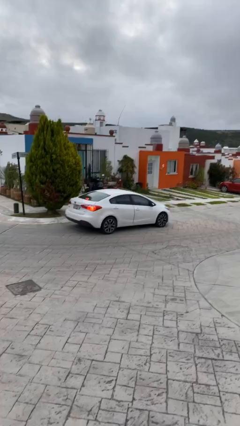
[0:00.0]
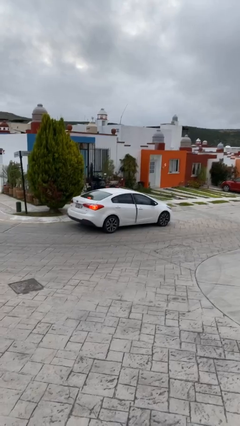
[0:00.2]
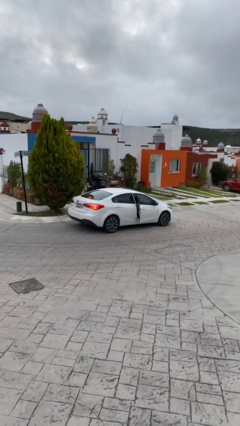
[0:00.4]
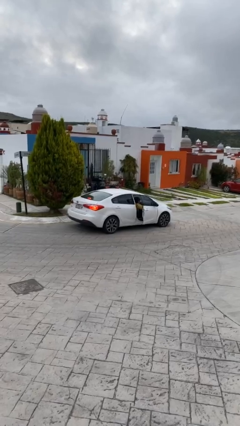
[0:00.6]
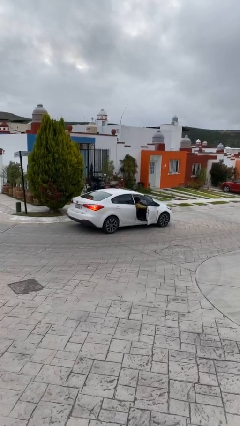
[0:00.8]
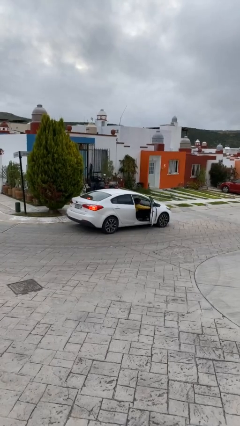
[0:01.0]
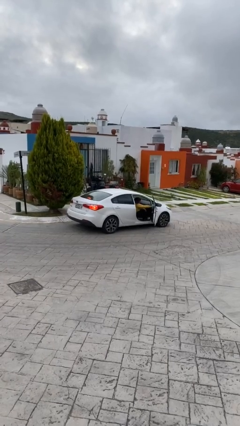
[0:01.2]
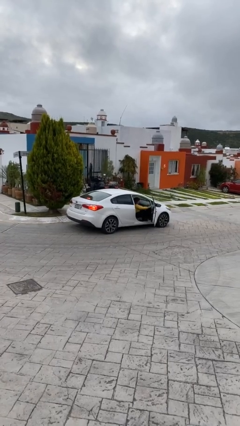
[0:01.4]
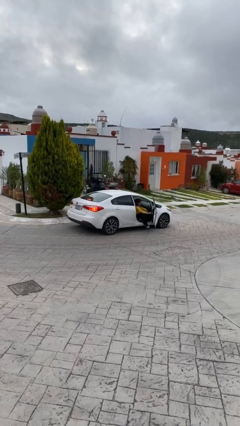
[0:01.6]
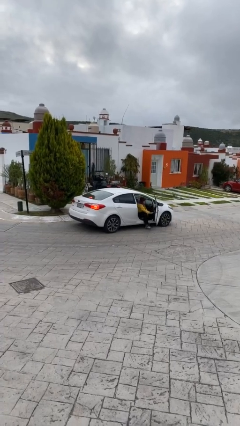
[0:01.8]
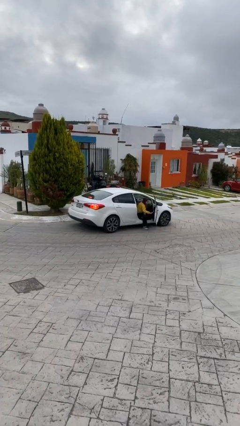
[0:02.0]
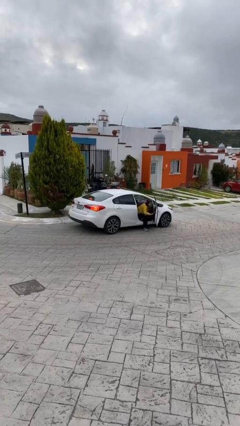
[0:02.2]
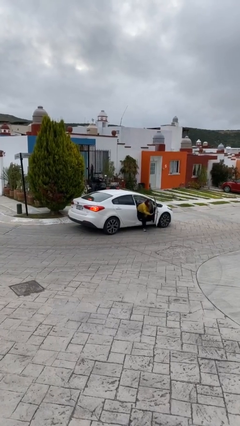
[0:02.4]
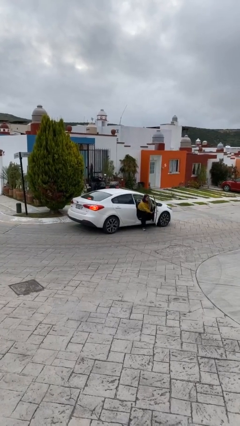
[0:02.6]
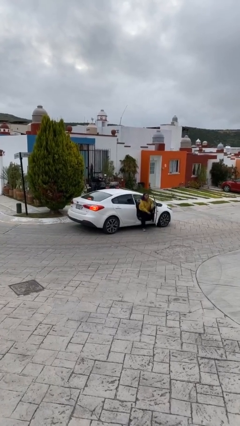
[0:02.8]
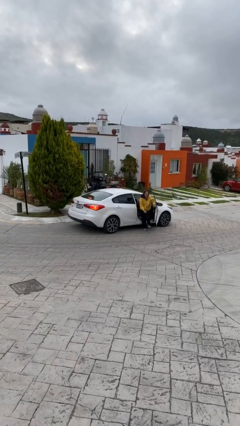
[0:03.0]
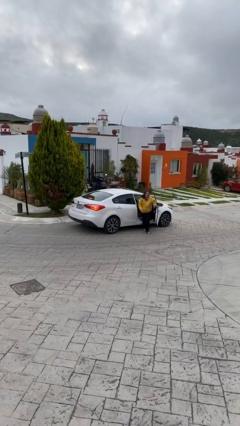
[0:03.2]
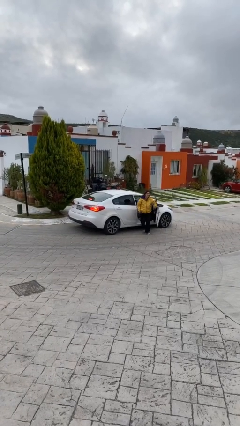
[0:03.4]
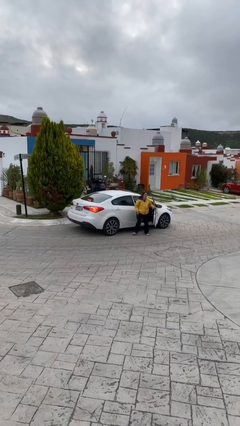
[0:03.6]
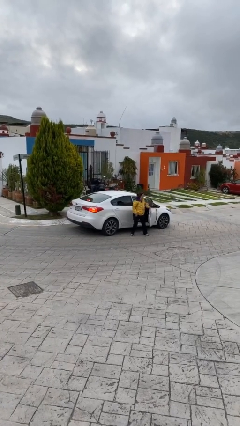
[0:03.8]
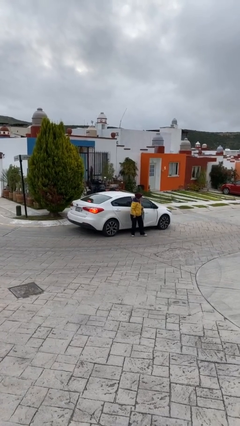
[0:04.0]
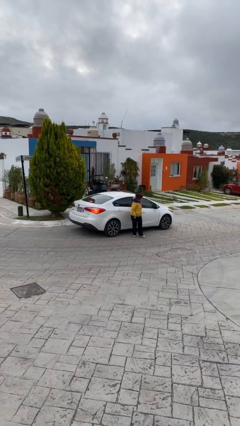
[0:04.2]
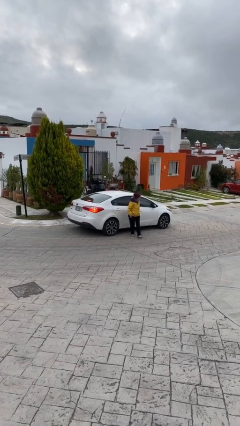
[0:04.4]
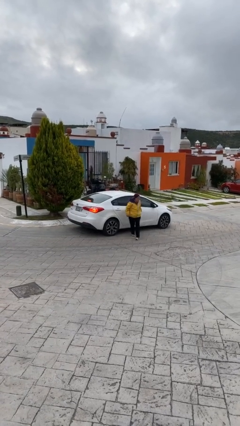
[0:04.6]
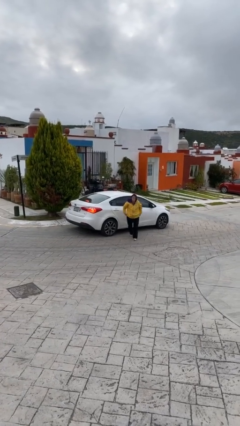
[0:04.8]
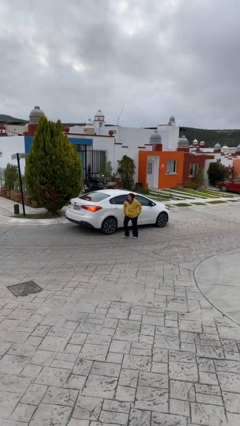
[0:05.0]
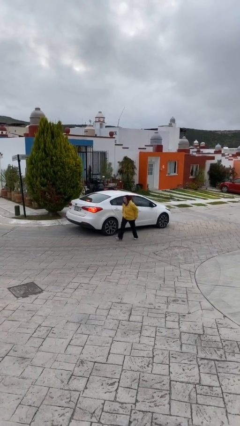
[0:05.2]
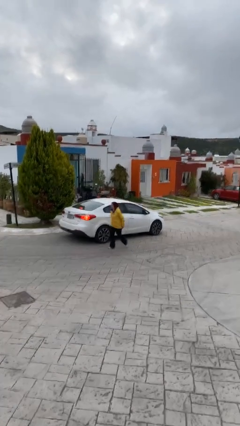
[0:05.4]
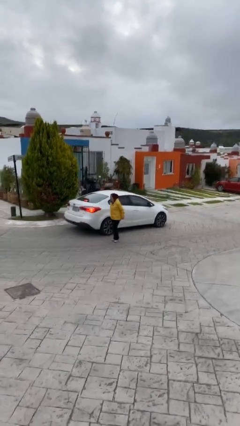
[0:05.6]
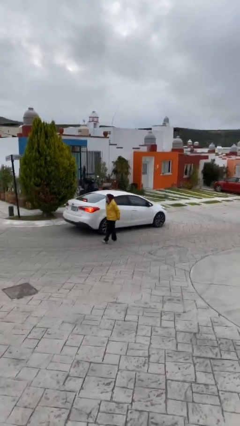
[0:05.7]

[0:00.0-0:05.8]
car drops off person

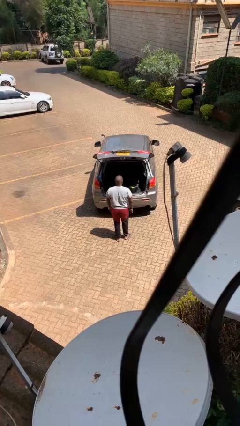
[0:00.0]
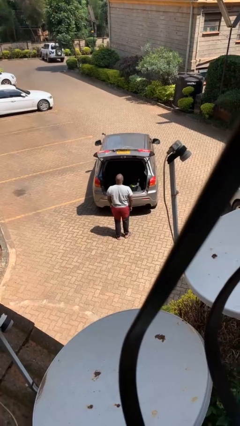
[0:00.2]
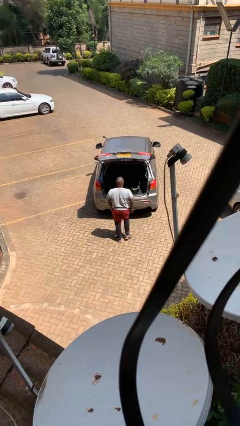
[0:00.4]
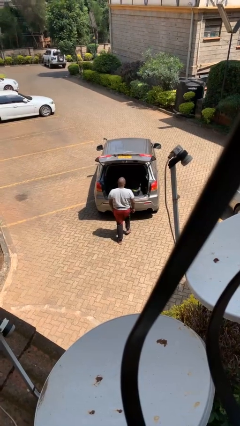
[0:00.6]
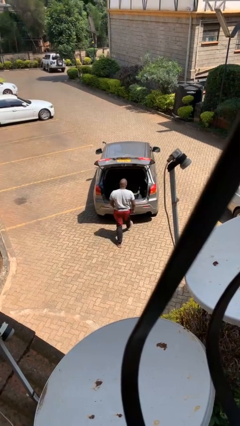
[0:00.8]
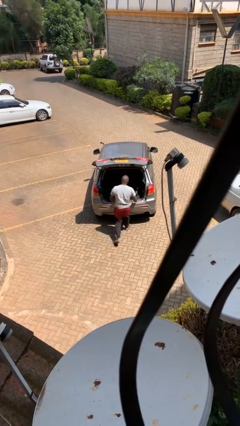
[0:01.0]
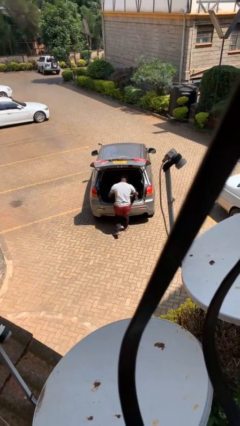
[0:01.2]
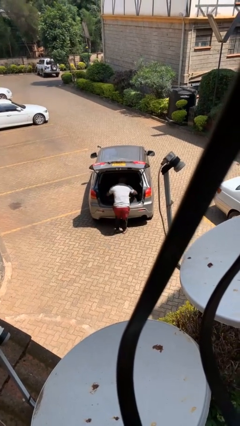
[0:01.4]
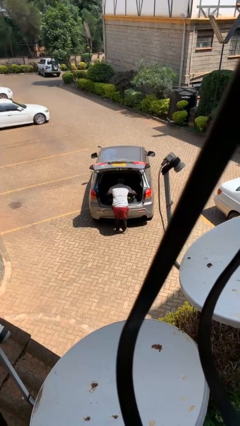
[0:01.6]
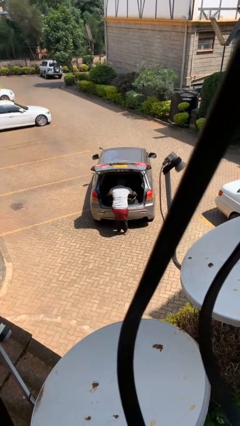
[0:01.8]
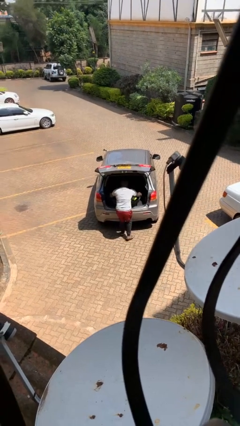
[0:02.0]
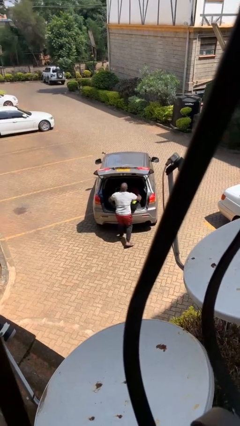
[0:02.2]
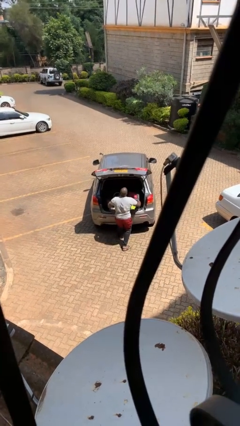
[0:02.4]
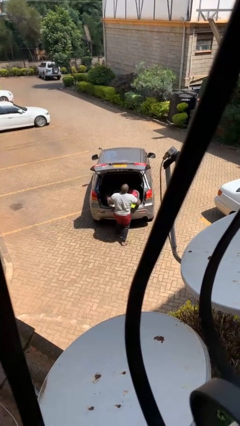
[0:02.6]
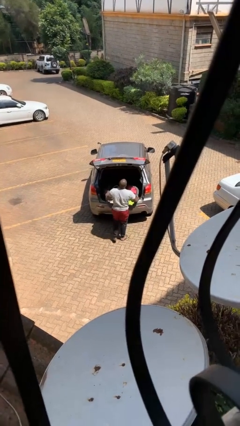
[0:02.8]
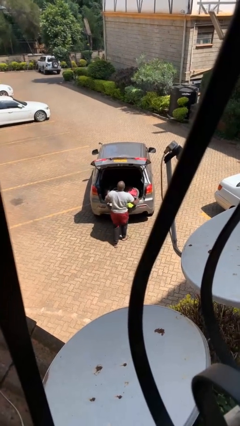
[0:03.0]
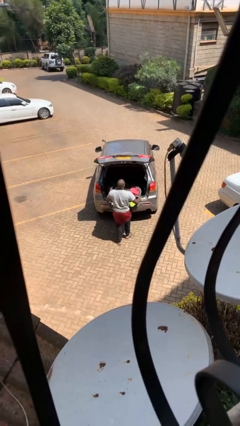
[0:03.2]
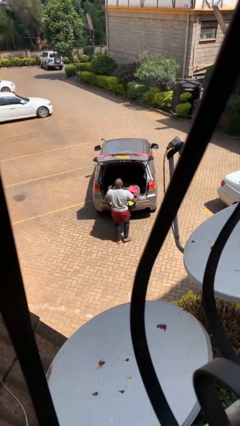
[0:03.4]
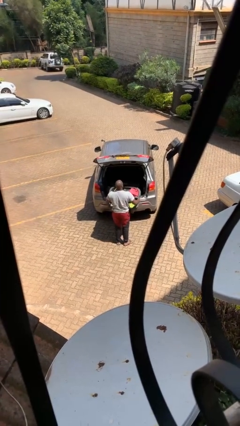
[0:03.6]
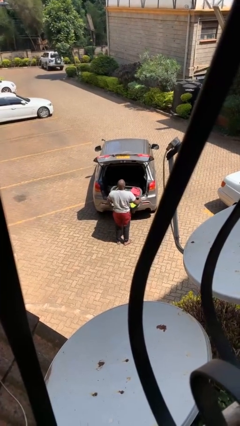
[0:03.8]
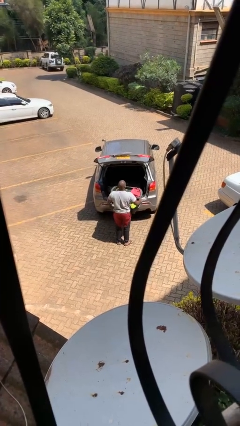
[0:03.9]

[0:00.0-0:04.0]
person unloads car

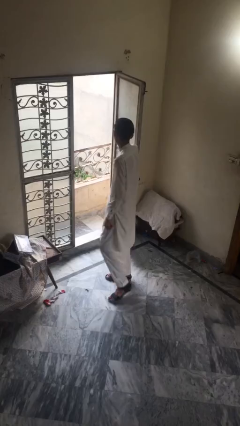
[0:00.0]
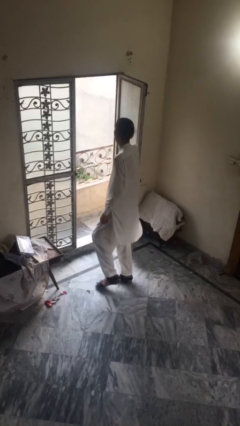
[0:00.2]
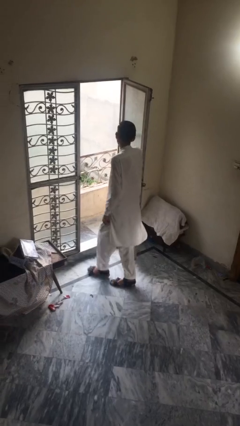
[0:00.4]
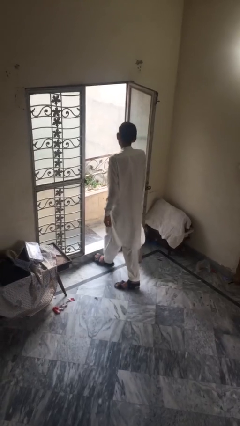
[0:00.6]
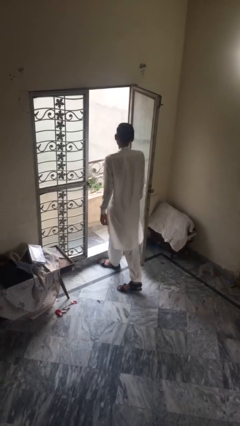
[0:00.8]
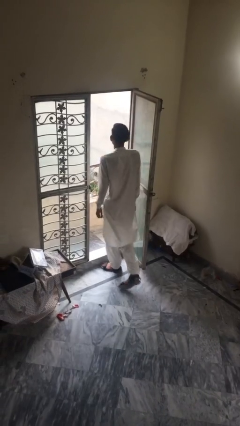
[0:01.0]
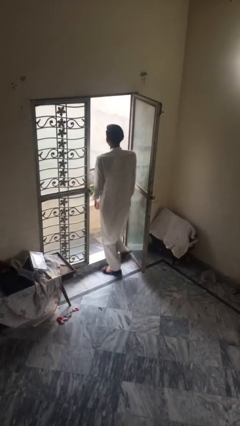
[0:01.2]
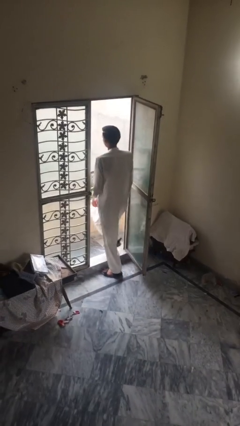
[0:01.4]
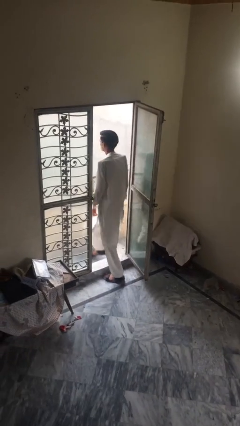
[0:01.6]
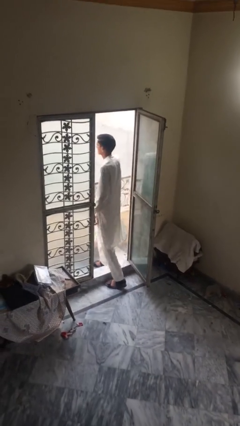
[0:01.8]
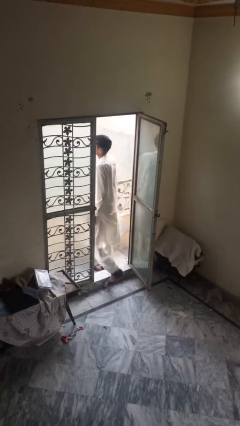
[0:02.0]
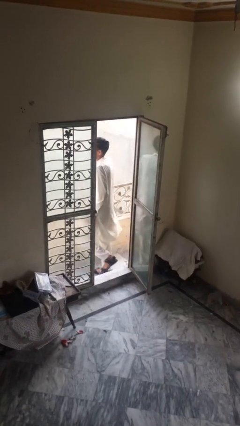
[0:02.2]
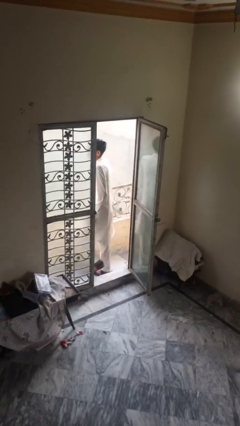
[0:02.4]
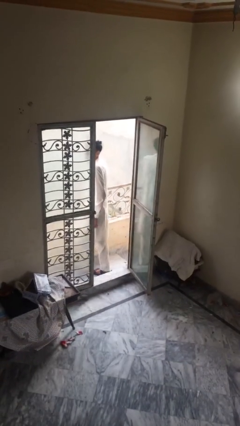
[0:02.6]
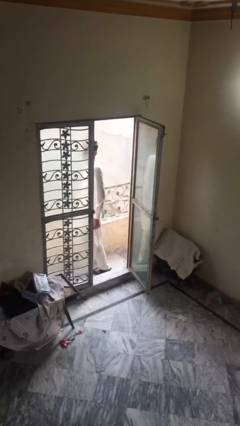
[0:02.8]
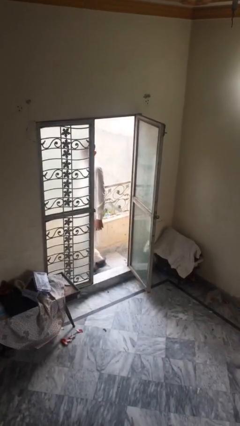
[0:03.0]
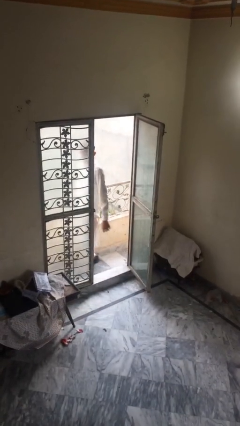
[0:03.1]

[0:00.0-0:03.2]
person exits scene through structure

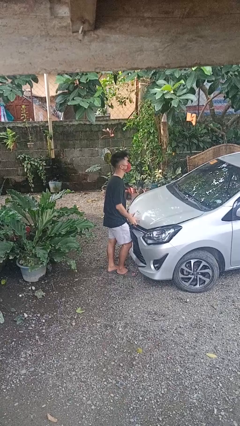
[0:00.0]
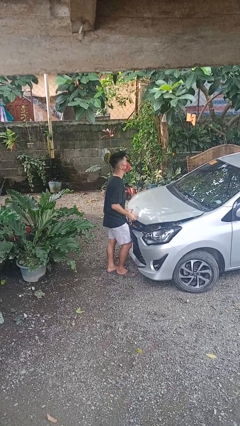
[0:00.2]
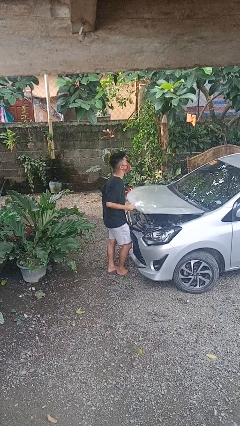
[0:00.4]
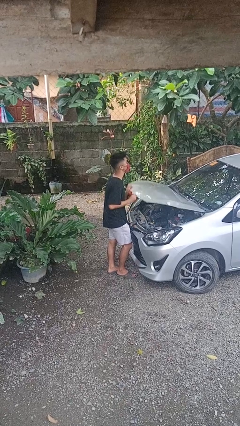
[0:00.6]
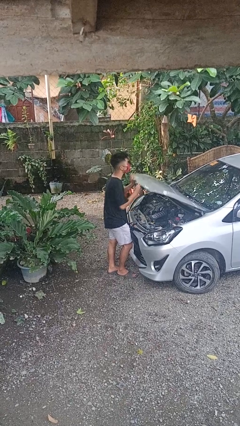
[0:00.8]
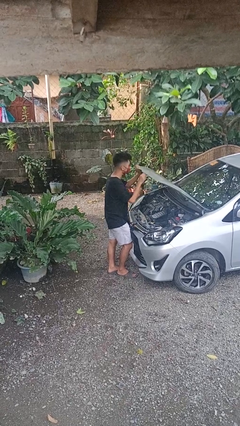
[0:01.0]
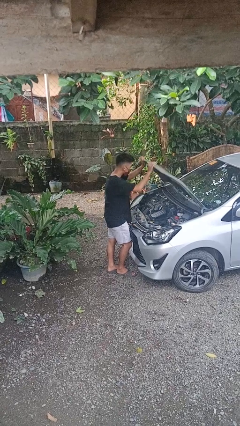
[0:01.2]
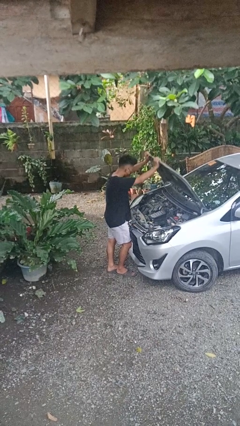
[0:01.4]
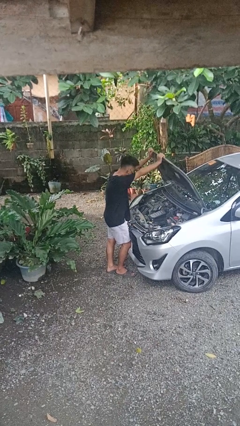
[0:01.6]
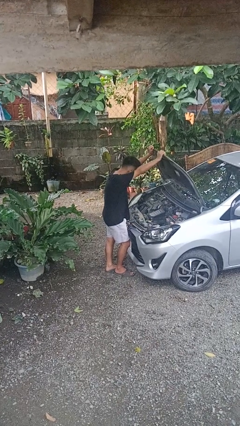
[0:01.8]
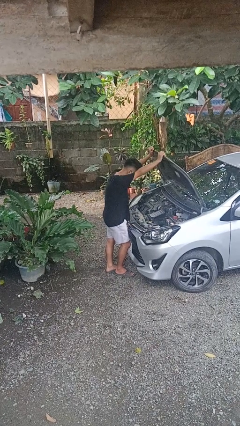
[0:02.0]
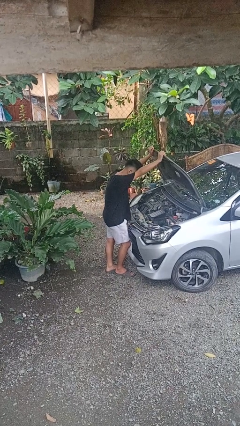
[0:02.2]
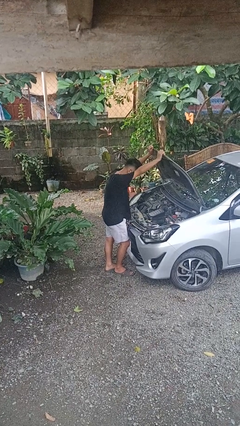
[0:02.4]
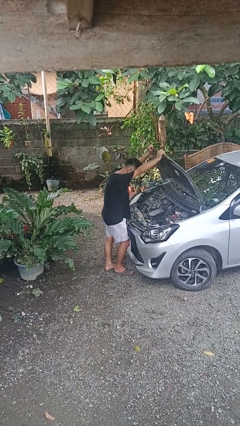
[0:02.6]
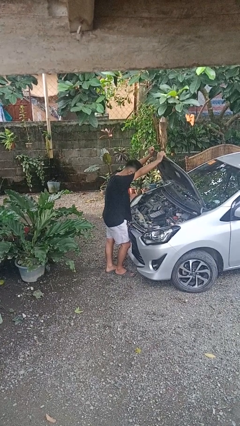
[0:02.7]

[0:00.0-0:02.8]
person opens car hood

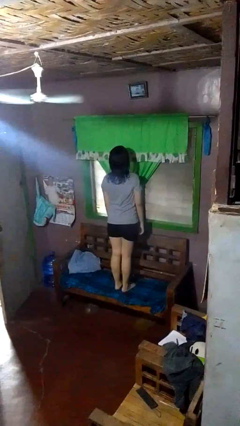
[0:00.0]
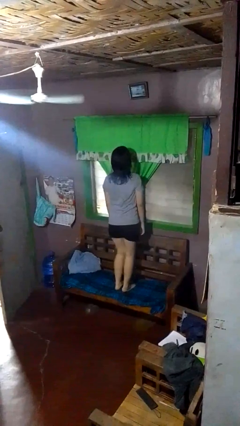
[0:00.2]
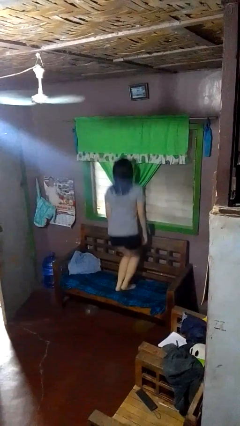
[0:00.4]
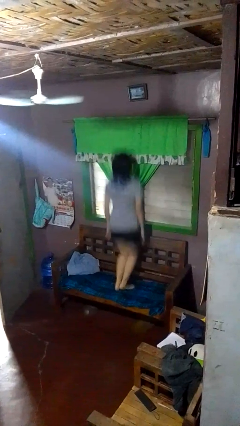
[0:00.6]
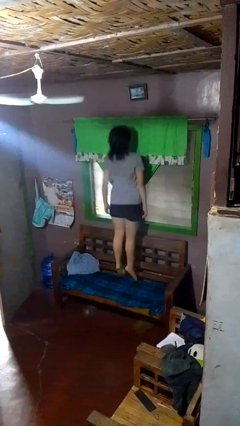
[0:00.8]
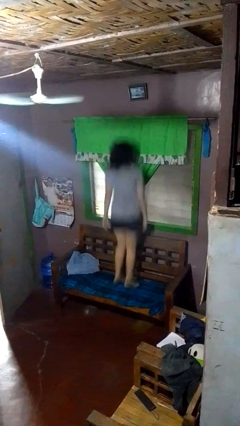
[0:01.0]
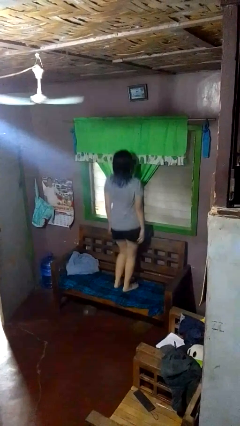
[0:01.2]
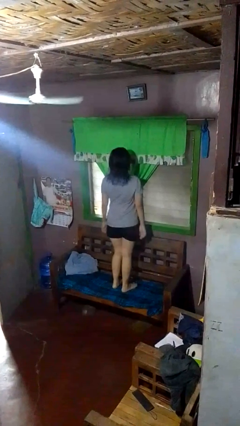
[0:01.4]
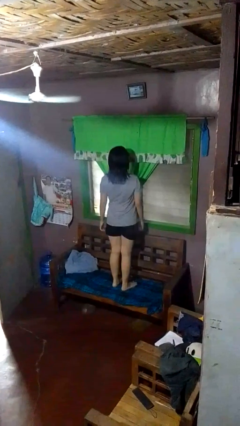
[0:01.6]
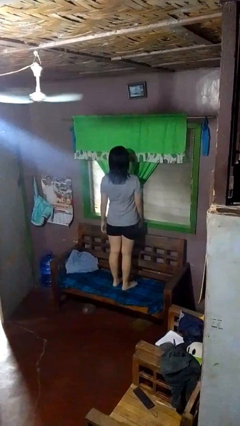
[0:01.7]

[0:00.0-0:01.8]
person jumps on couch

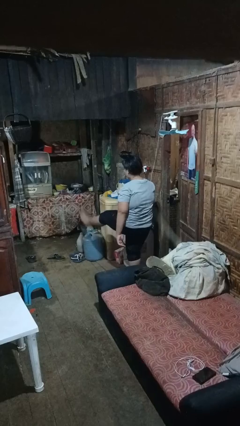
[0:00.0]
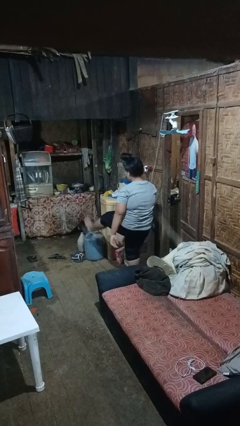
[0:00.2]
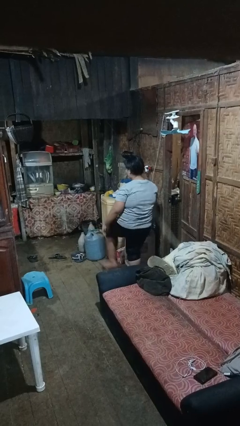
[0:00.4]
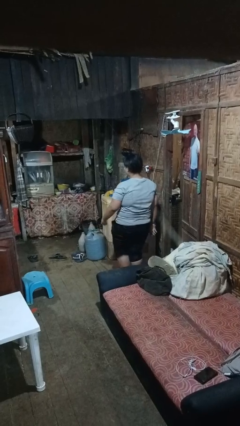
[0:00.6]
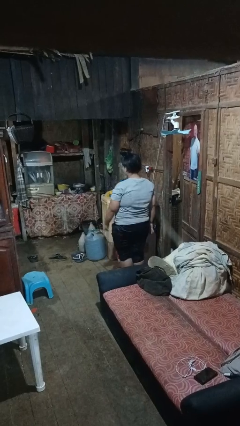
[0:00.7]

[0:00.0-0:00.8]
person karate kicks
